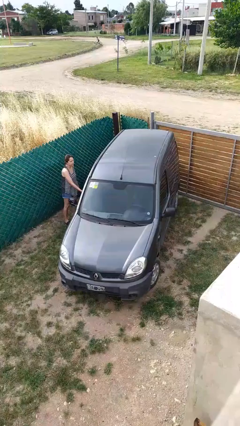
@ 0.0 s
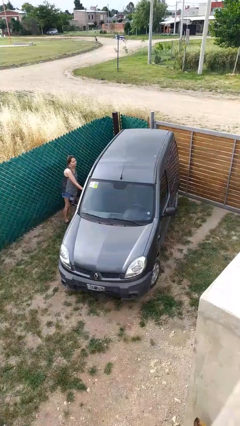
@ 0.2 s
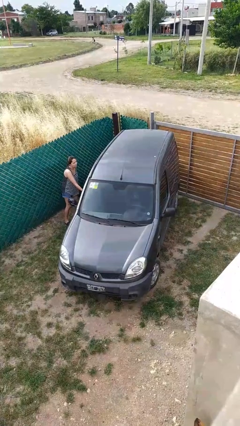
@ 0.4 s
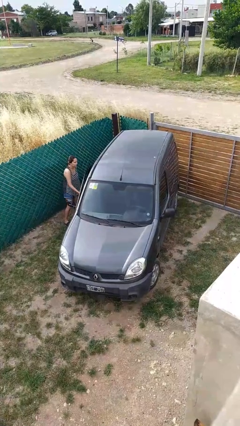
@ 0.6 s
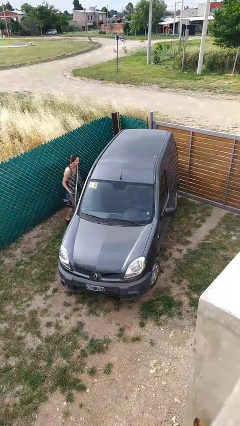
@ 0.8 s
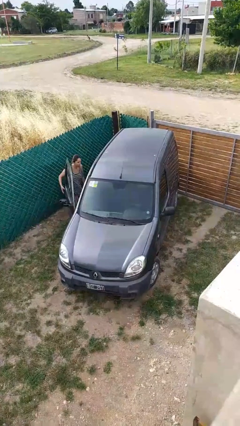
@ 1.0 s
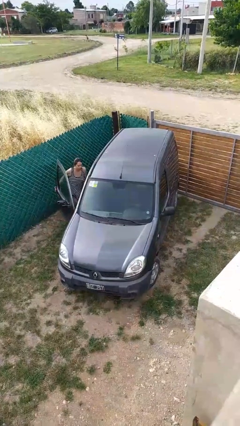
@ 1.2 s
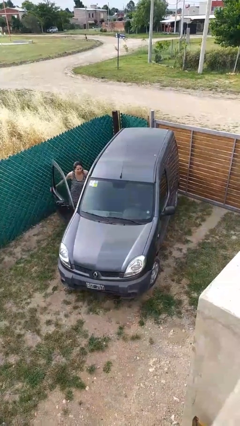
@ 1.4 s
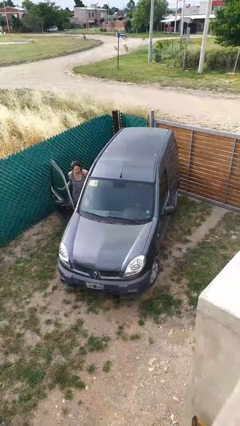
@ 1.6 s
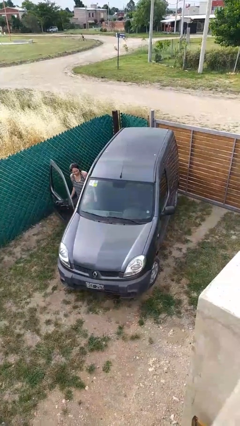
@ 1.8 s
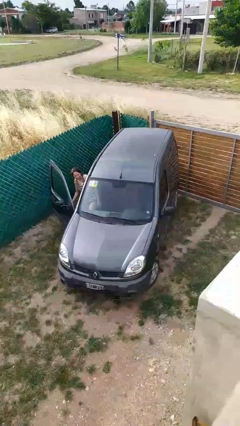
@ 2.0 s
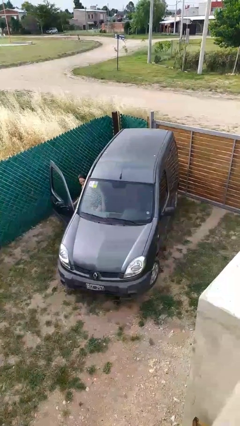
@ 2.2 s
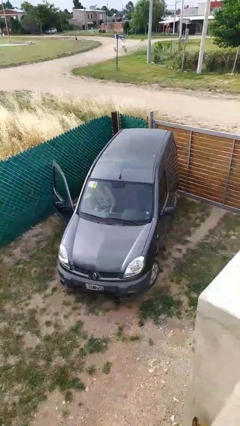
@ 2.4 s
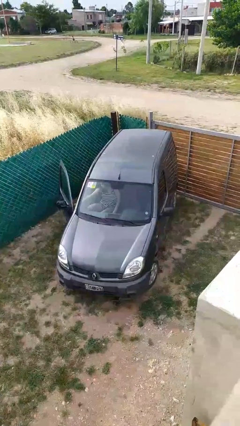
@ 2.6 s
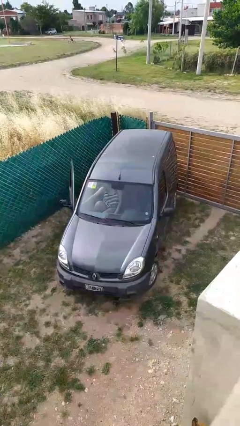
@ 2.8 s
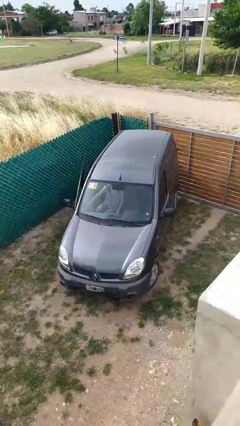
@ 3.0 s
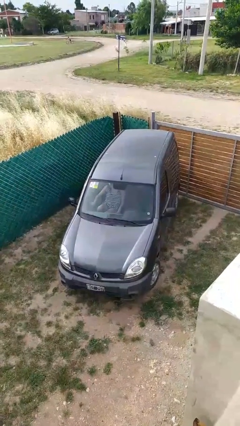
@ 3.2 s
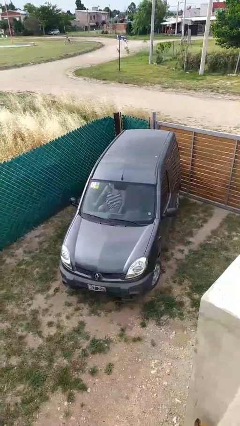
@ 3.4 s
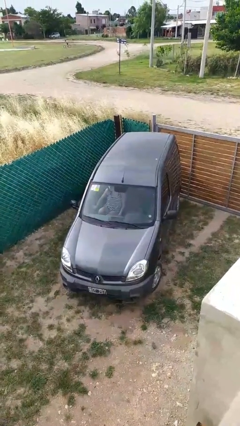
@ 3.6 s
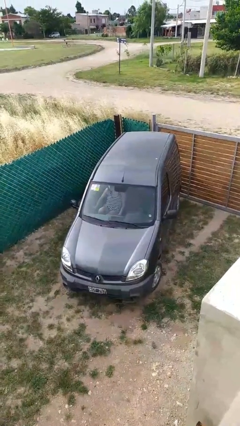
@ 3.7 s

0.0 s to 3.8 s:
car picks up person

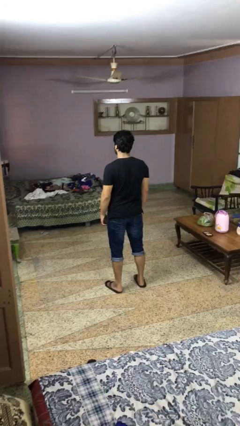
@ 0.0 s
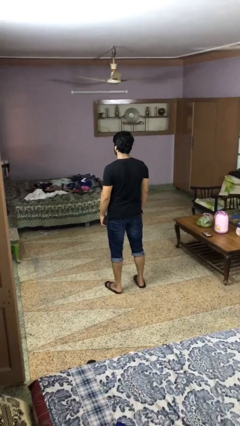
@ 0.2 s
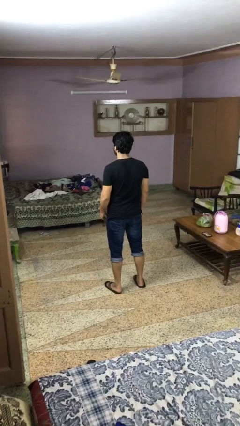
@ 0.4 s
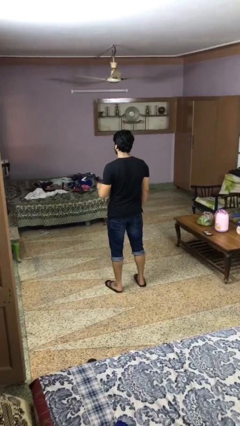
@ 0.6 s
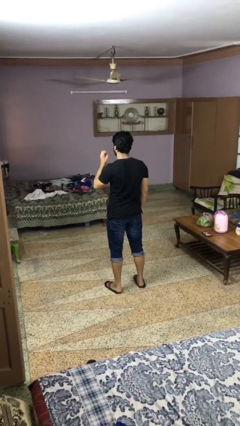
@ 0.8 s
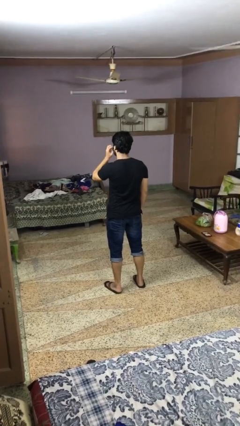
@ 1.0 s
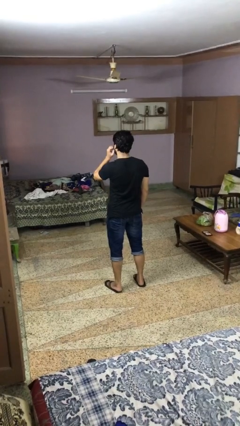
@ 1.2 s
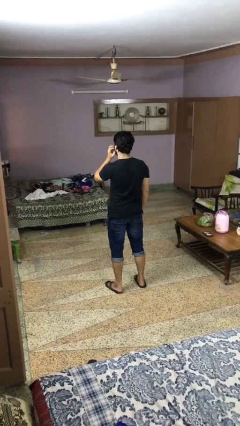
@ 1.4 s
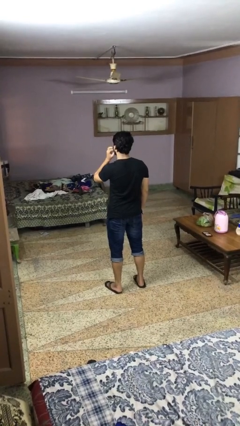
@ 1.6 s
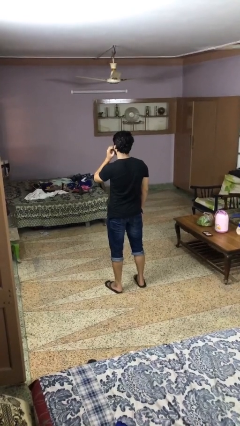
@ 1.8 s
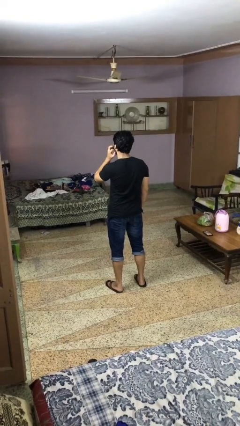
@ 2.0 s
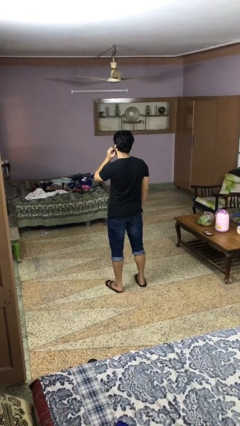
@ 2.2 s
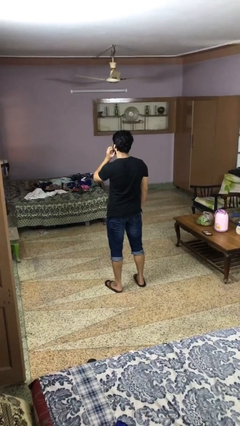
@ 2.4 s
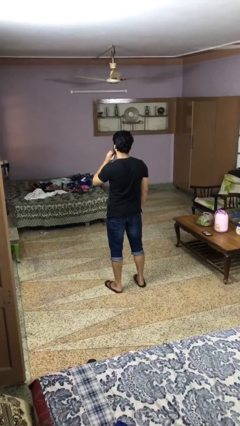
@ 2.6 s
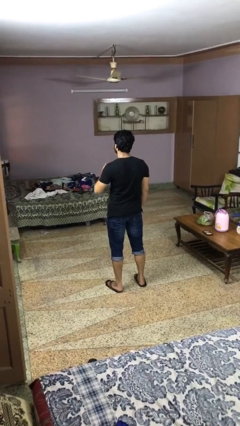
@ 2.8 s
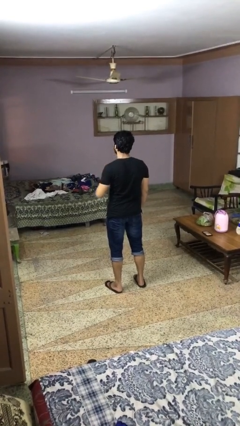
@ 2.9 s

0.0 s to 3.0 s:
person scratches face

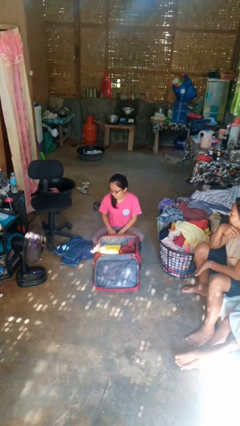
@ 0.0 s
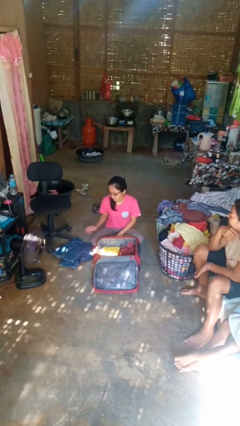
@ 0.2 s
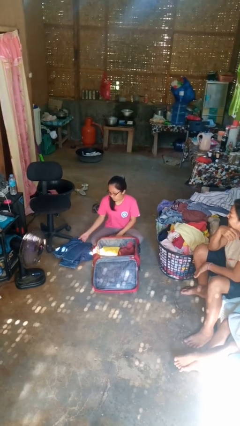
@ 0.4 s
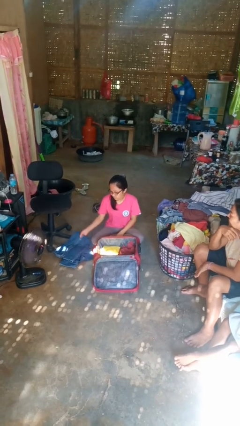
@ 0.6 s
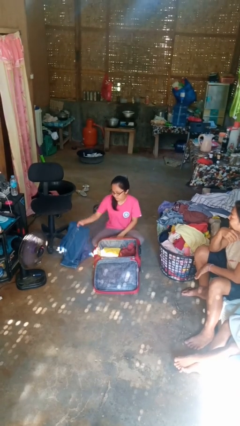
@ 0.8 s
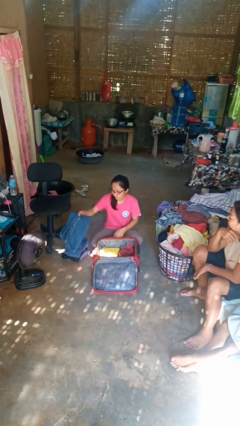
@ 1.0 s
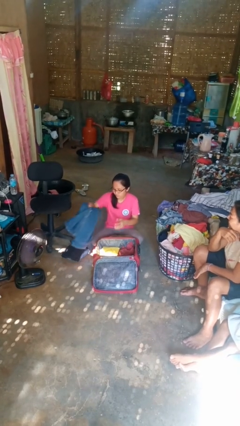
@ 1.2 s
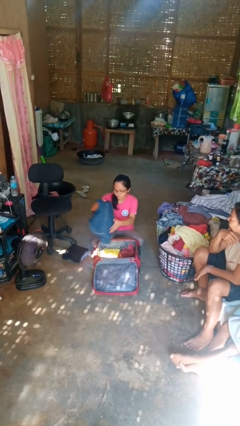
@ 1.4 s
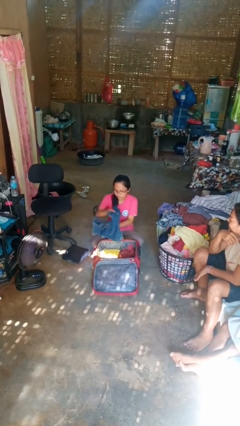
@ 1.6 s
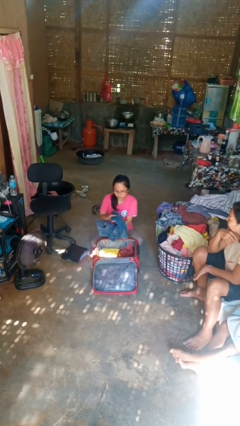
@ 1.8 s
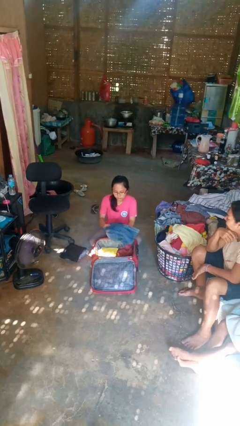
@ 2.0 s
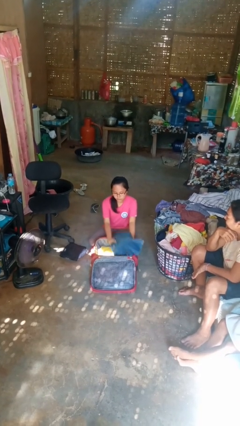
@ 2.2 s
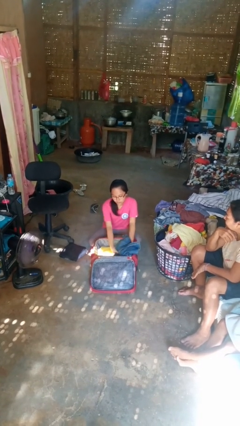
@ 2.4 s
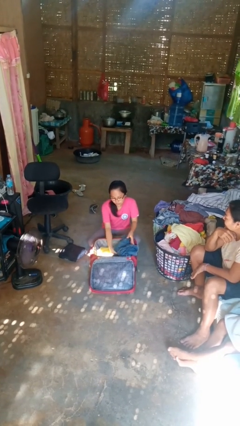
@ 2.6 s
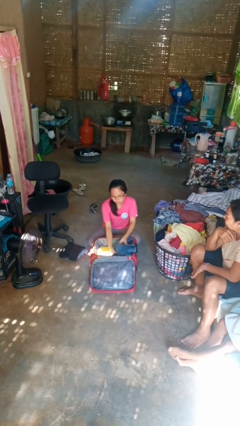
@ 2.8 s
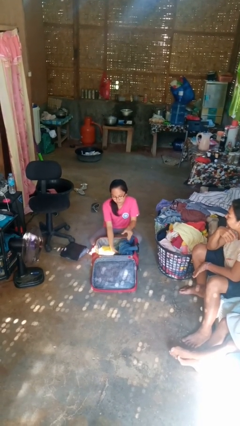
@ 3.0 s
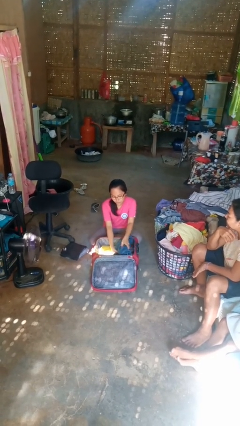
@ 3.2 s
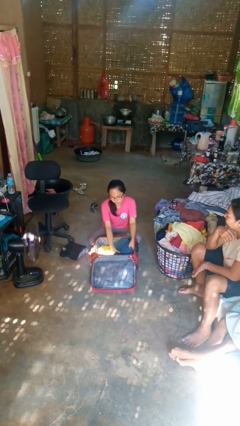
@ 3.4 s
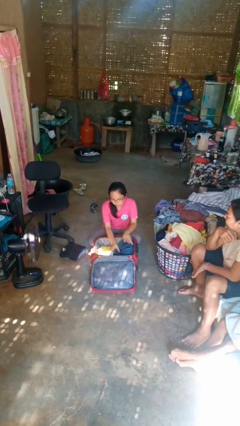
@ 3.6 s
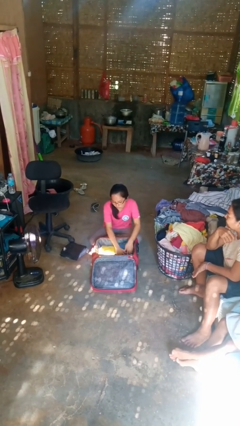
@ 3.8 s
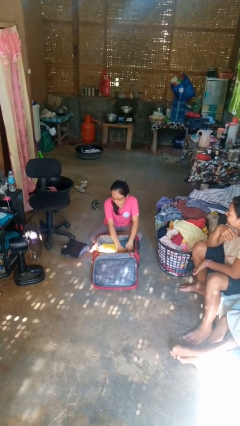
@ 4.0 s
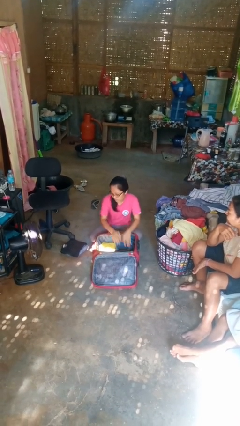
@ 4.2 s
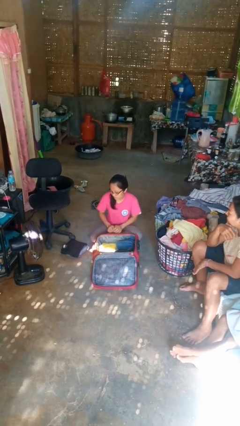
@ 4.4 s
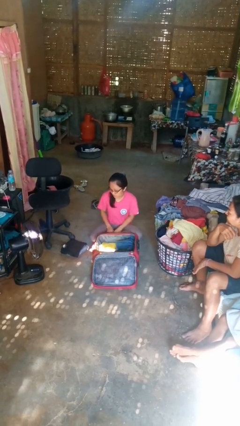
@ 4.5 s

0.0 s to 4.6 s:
person loads clothes into suitcase

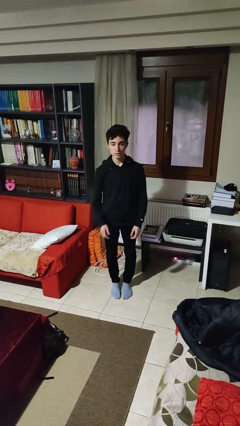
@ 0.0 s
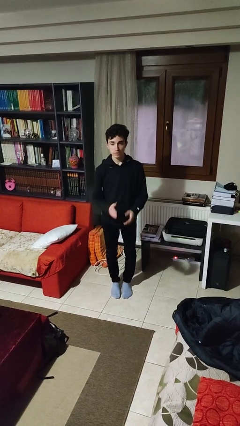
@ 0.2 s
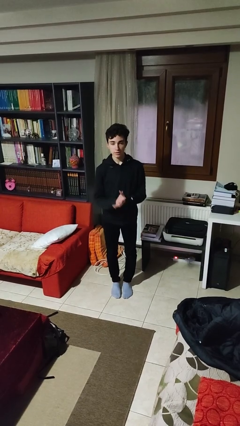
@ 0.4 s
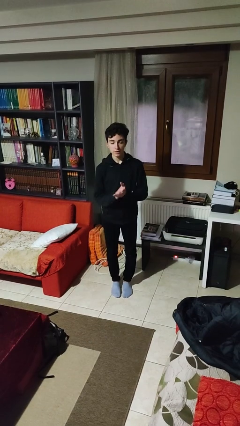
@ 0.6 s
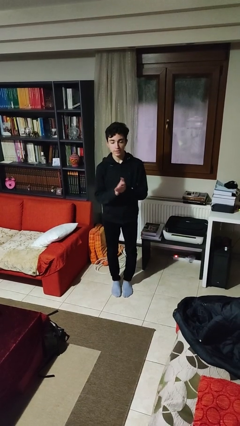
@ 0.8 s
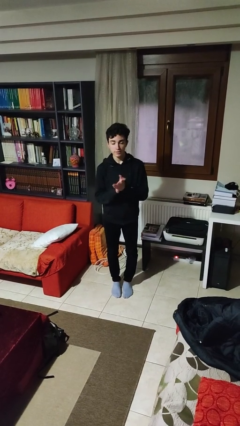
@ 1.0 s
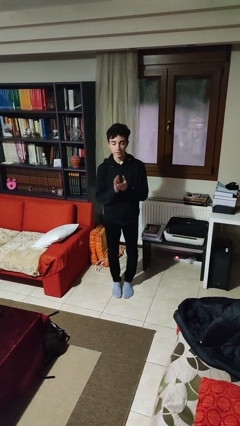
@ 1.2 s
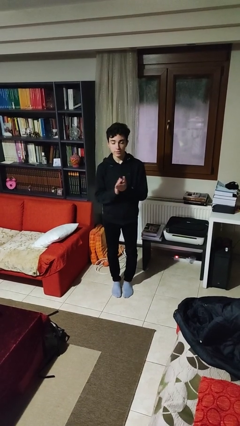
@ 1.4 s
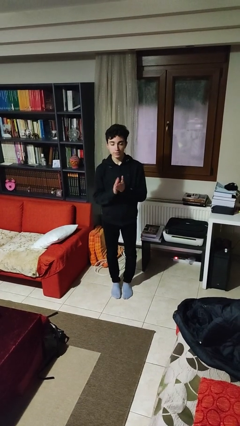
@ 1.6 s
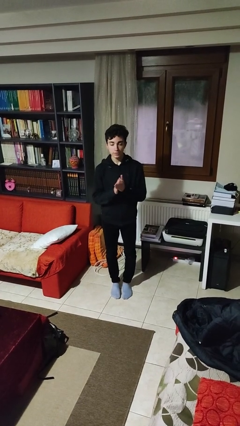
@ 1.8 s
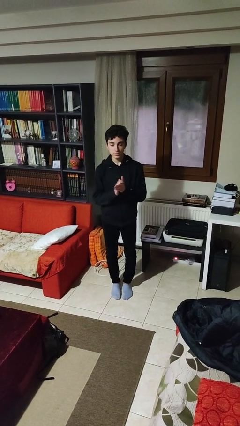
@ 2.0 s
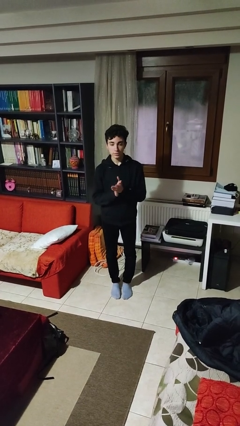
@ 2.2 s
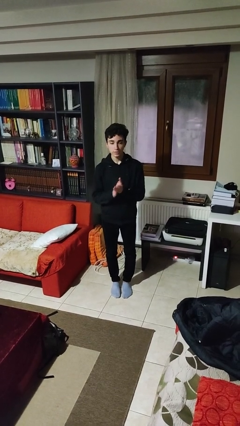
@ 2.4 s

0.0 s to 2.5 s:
person claps hands

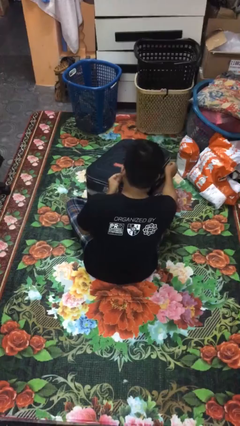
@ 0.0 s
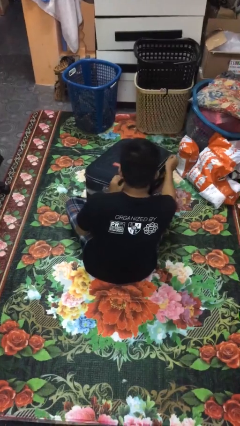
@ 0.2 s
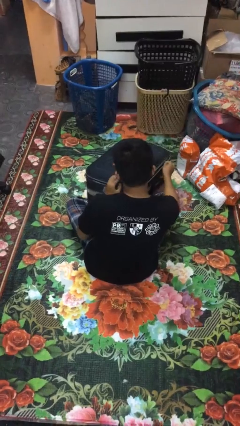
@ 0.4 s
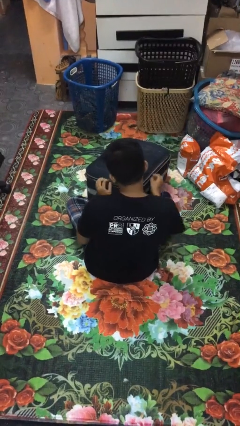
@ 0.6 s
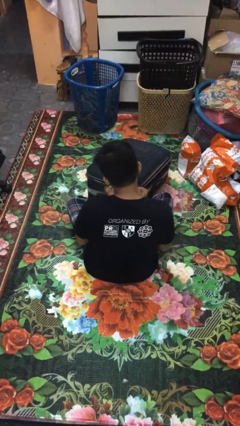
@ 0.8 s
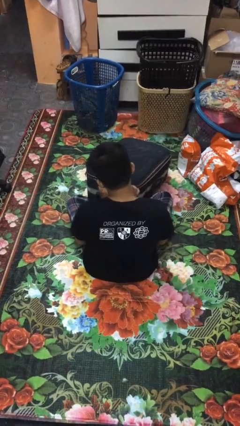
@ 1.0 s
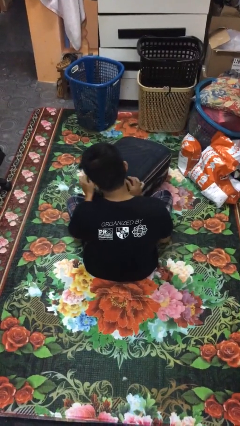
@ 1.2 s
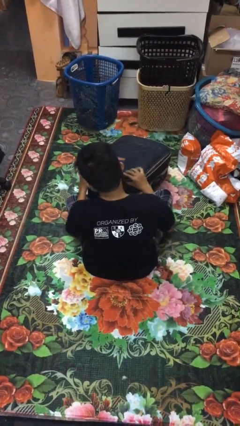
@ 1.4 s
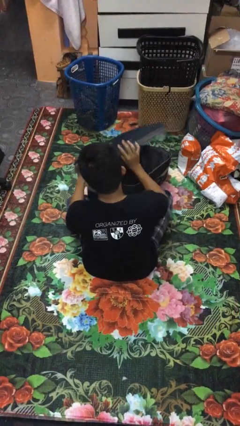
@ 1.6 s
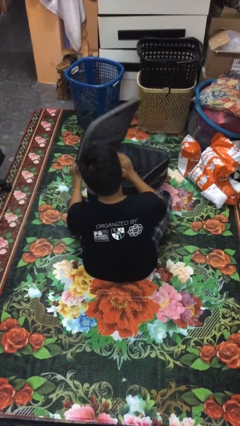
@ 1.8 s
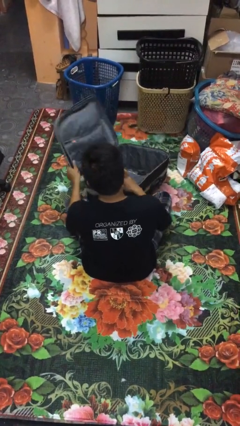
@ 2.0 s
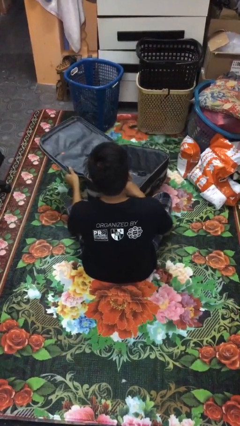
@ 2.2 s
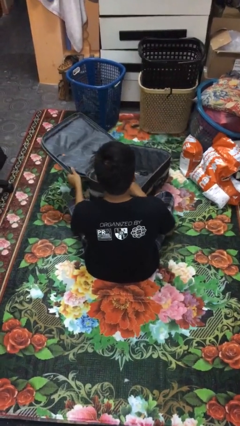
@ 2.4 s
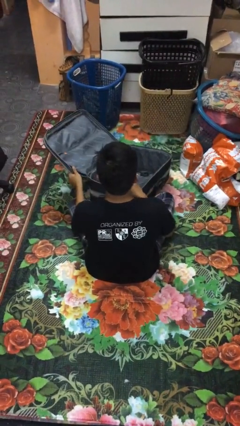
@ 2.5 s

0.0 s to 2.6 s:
person opens suitcase

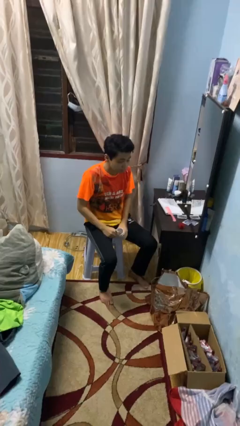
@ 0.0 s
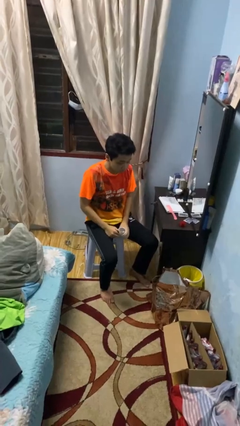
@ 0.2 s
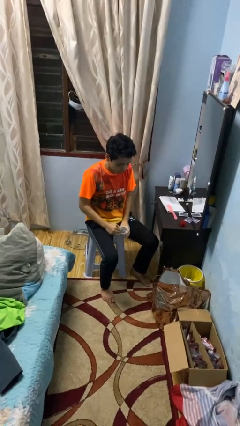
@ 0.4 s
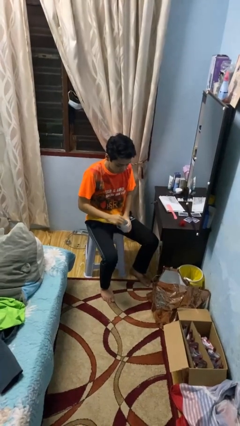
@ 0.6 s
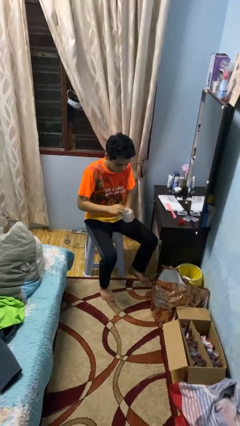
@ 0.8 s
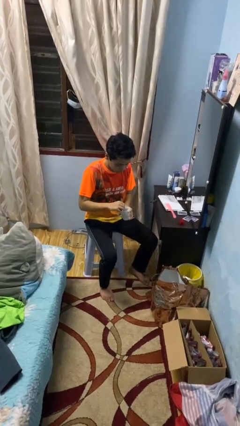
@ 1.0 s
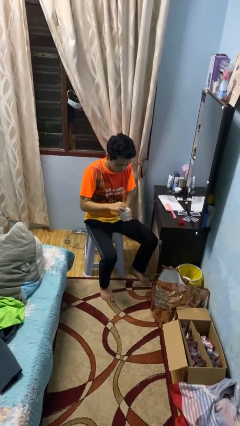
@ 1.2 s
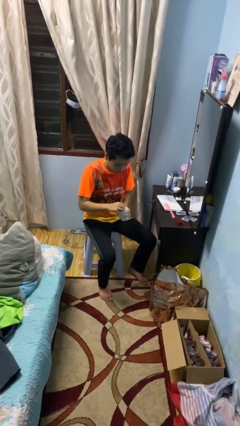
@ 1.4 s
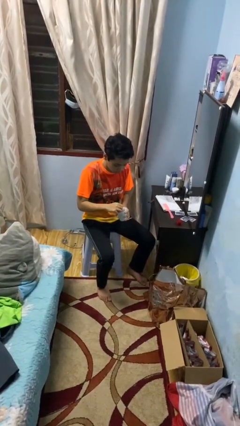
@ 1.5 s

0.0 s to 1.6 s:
person stirs mug
